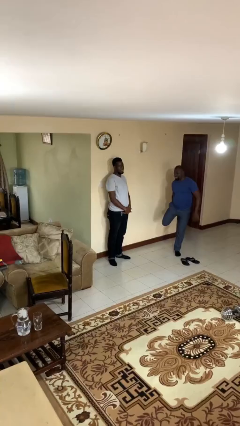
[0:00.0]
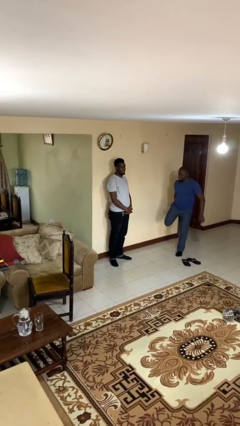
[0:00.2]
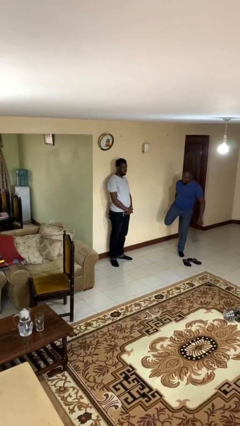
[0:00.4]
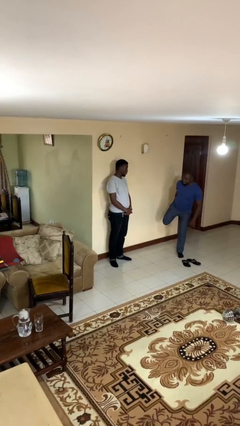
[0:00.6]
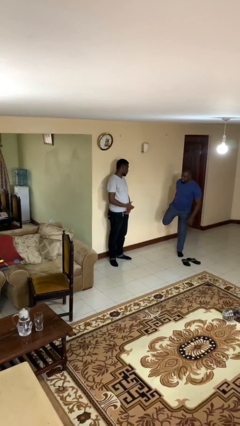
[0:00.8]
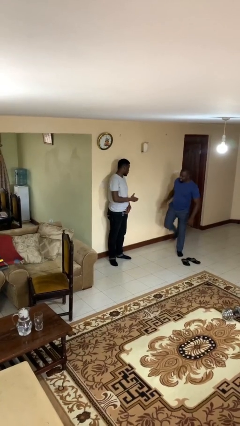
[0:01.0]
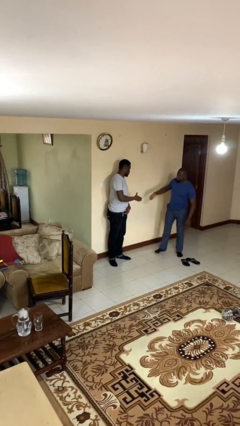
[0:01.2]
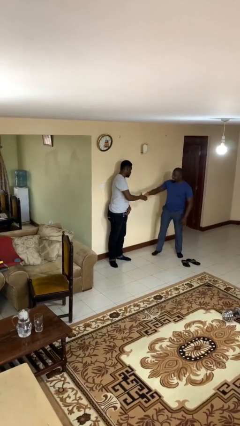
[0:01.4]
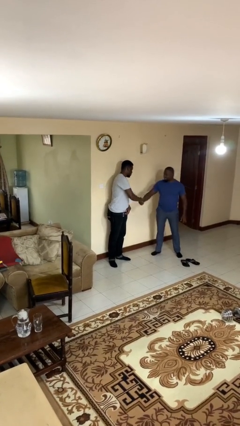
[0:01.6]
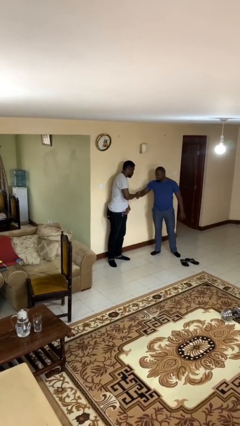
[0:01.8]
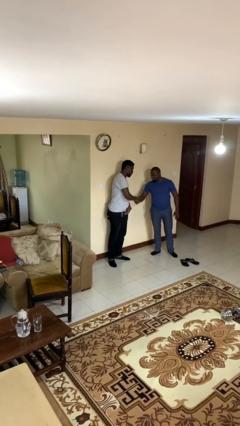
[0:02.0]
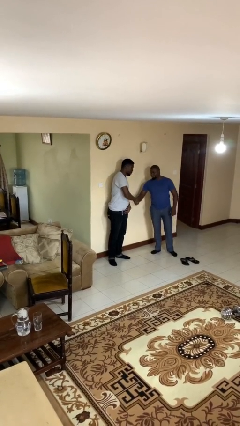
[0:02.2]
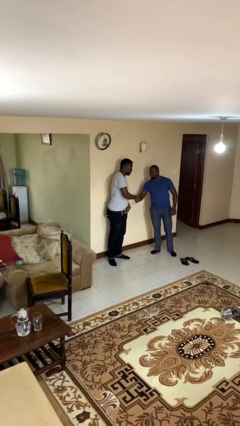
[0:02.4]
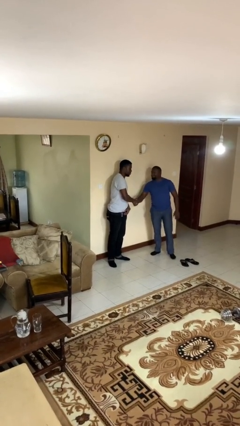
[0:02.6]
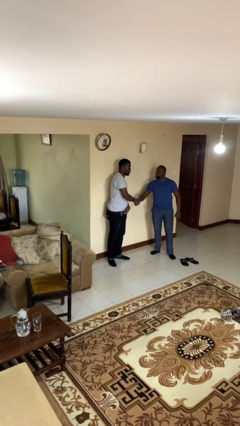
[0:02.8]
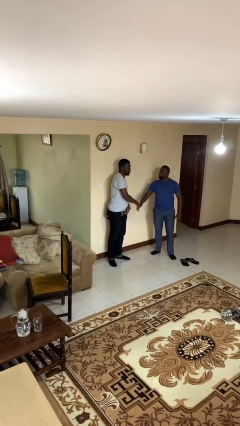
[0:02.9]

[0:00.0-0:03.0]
person shakes hand

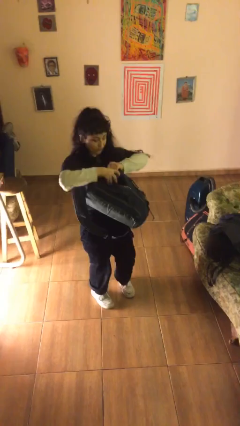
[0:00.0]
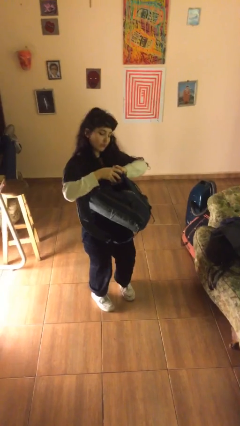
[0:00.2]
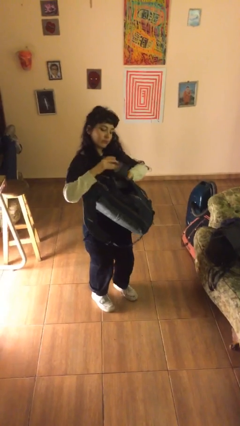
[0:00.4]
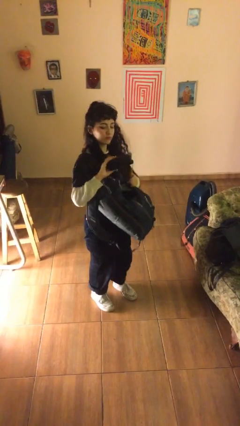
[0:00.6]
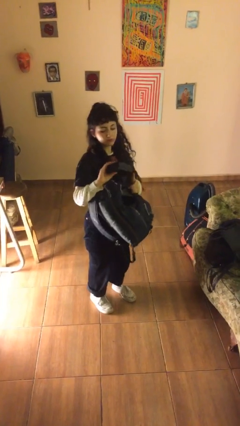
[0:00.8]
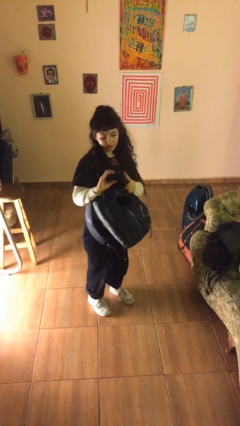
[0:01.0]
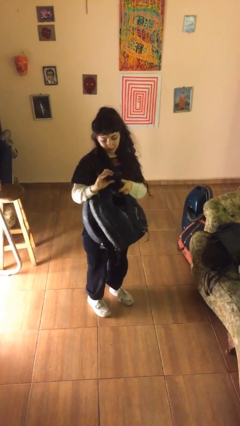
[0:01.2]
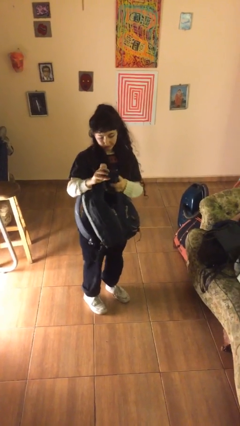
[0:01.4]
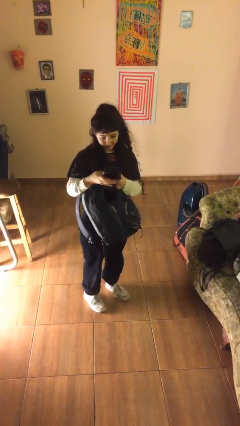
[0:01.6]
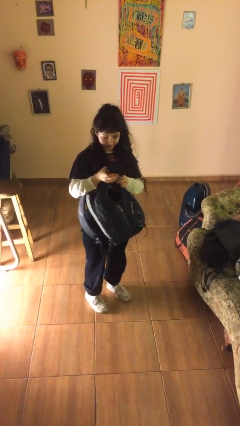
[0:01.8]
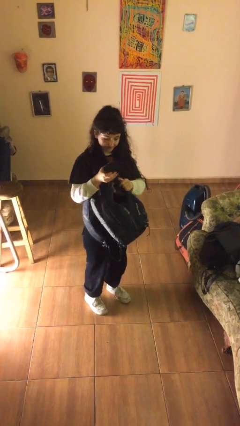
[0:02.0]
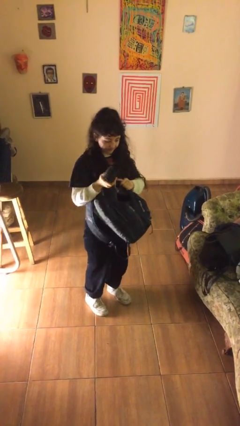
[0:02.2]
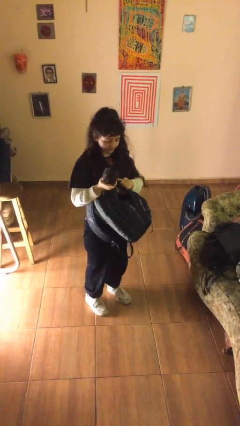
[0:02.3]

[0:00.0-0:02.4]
person takes object from backpack

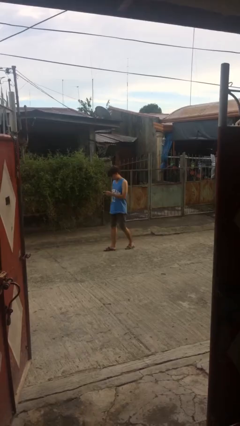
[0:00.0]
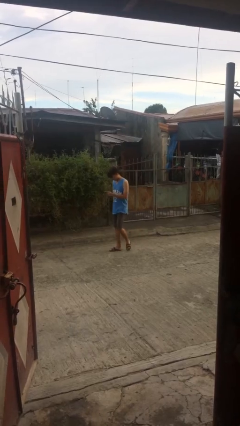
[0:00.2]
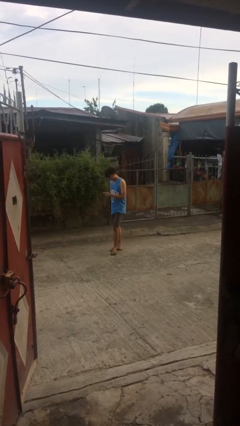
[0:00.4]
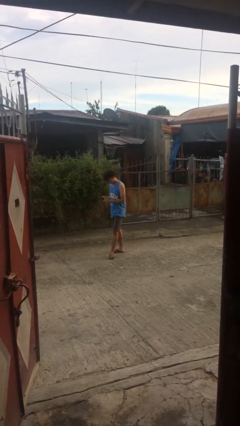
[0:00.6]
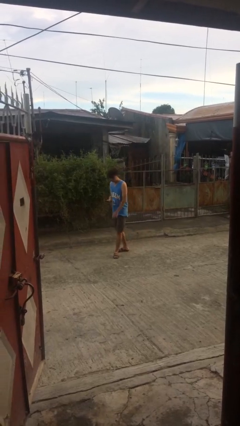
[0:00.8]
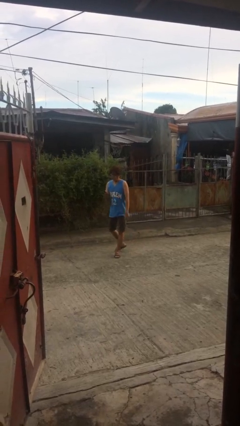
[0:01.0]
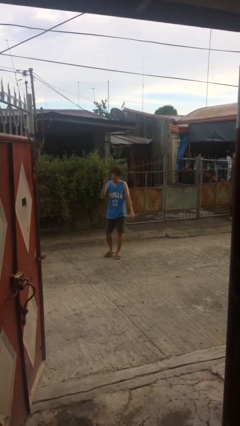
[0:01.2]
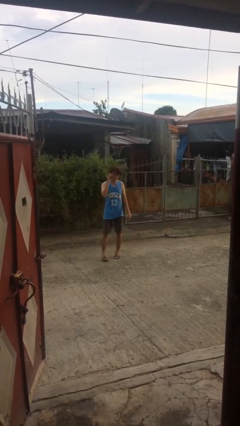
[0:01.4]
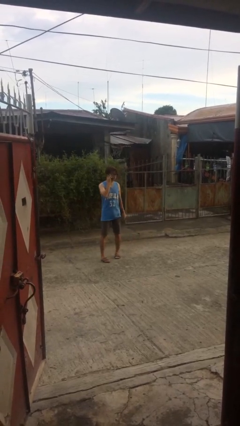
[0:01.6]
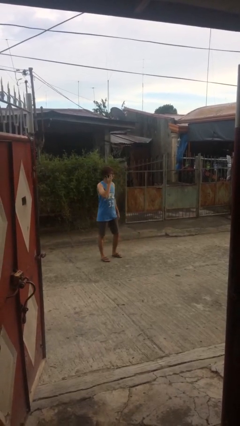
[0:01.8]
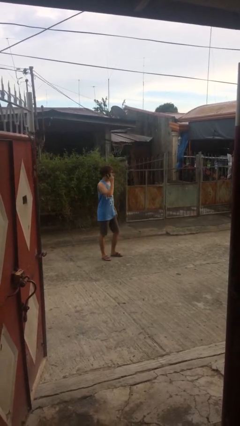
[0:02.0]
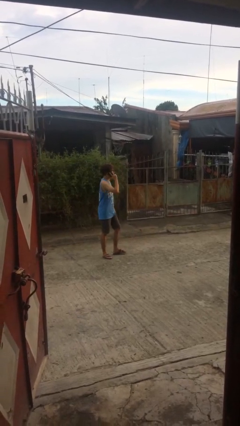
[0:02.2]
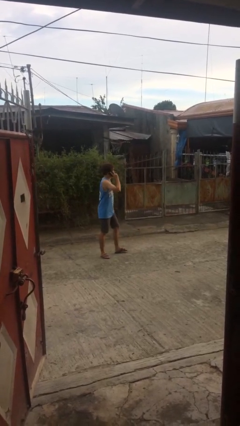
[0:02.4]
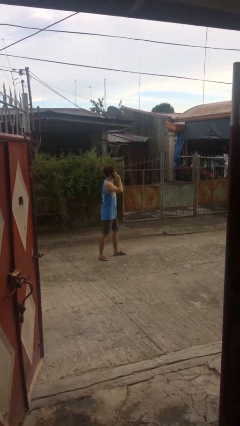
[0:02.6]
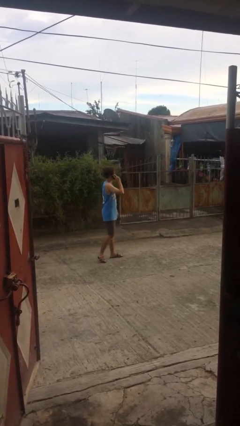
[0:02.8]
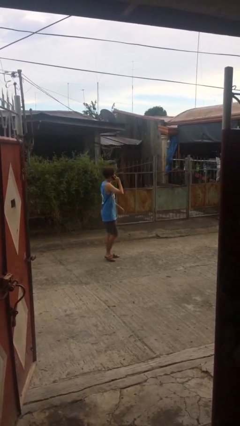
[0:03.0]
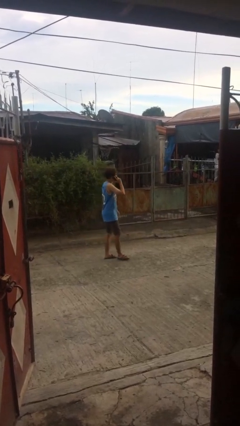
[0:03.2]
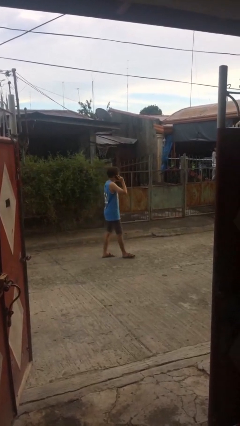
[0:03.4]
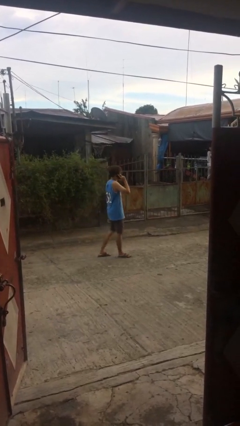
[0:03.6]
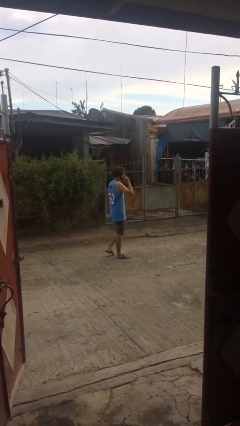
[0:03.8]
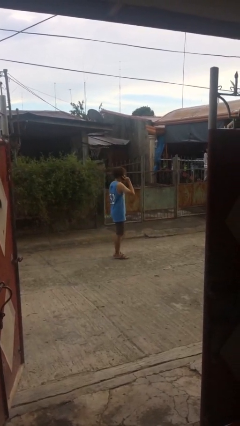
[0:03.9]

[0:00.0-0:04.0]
person talks on phone

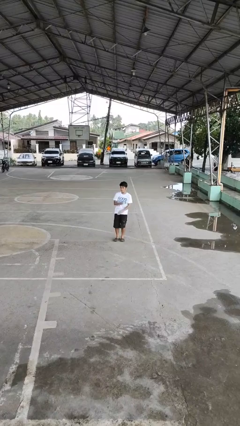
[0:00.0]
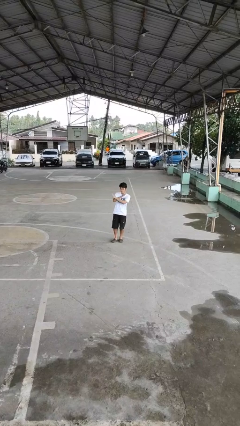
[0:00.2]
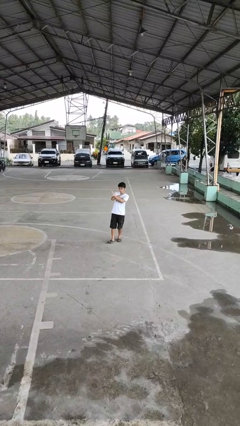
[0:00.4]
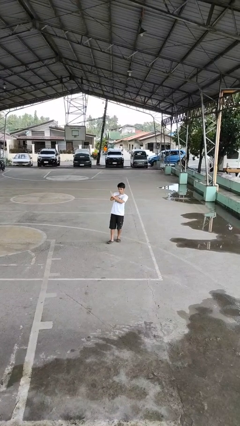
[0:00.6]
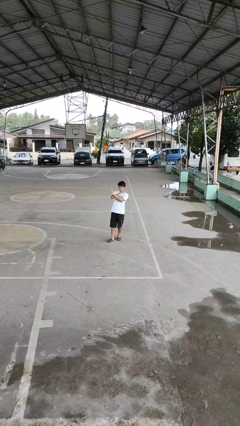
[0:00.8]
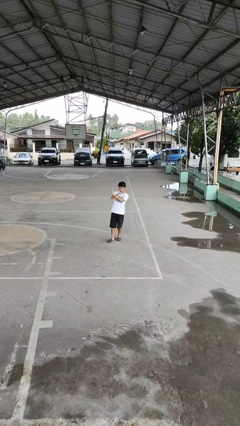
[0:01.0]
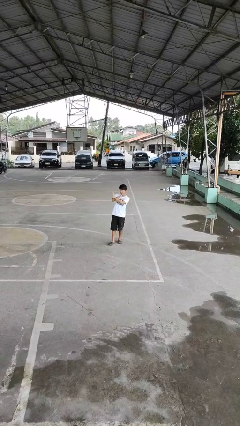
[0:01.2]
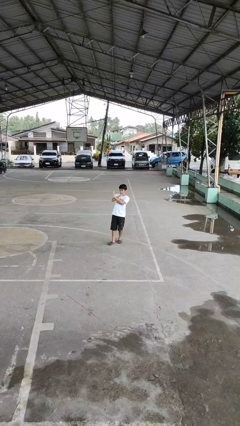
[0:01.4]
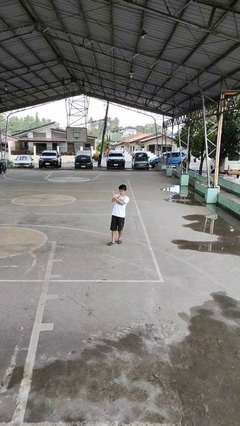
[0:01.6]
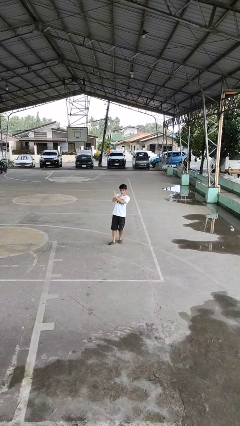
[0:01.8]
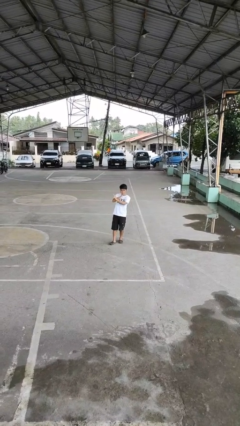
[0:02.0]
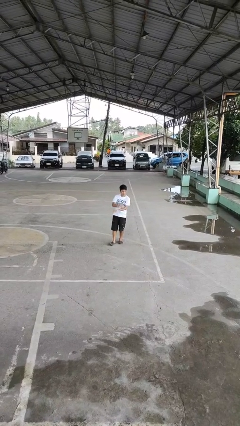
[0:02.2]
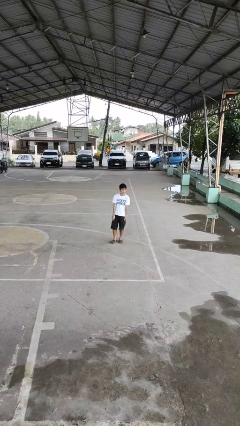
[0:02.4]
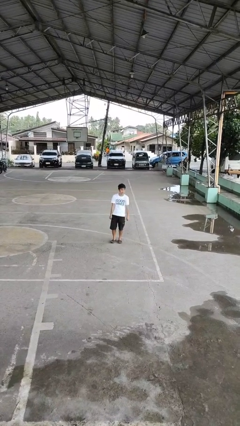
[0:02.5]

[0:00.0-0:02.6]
person gestures arms x

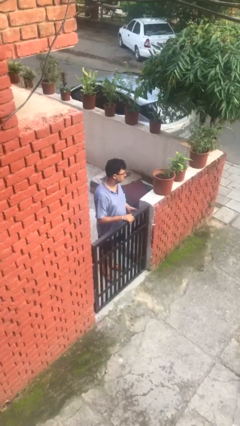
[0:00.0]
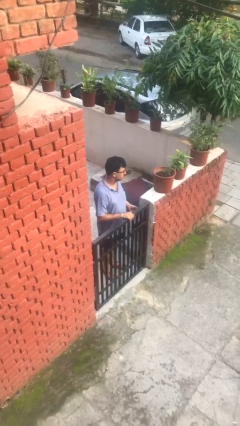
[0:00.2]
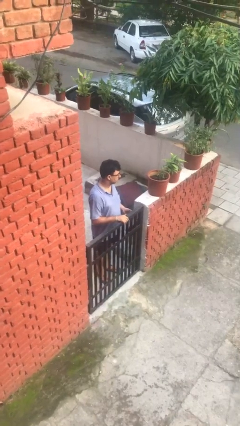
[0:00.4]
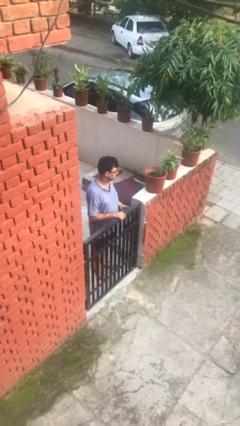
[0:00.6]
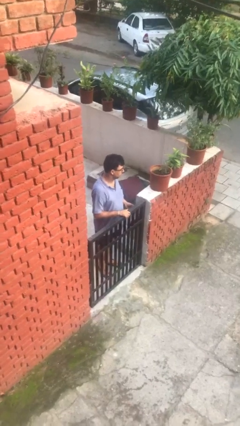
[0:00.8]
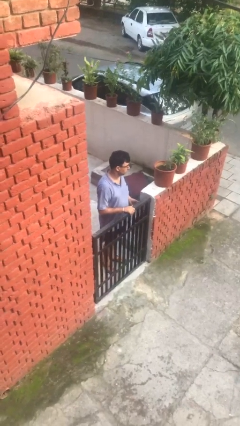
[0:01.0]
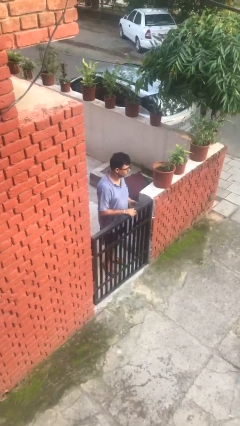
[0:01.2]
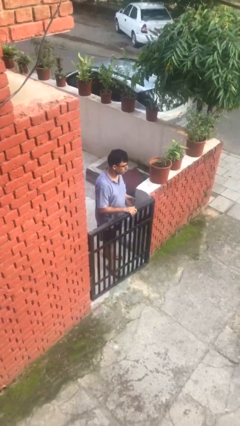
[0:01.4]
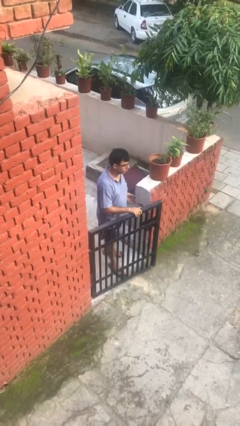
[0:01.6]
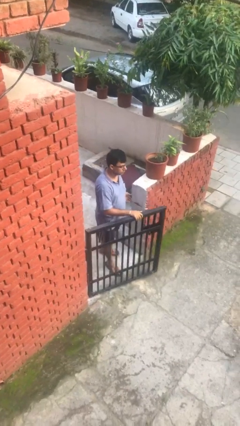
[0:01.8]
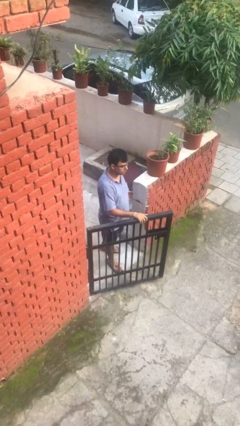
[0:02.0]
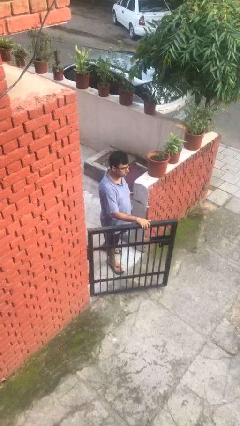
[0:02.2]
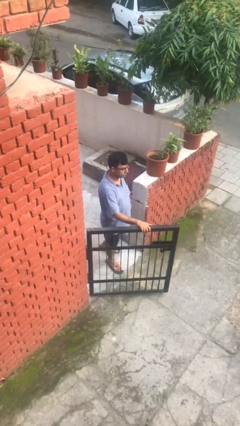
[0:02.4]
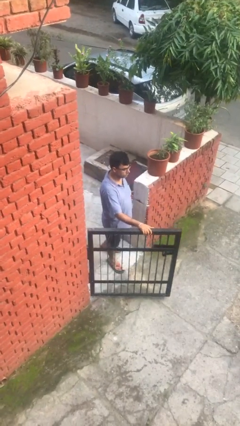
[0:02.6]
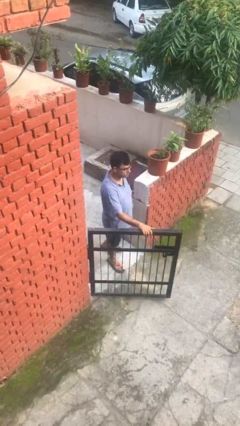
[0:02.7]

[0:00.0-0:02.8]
person opens gate

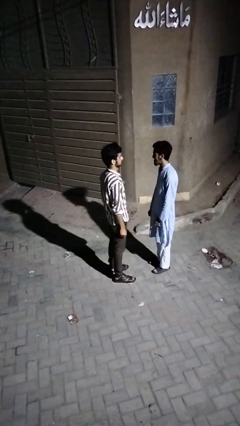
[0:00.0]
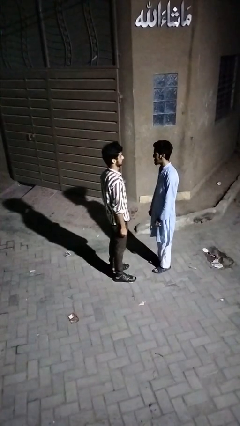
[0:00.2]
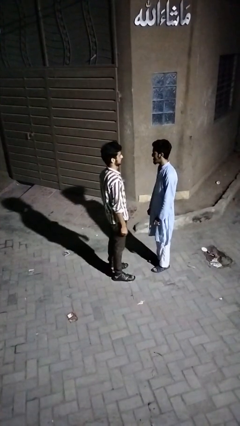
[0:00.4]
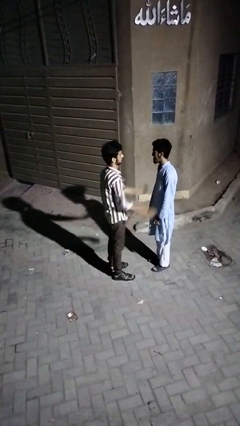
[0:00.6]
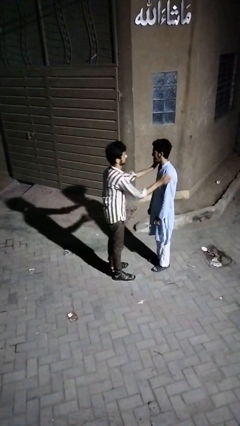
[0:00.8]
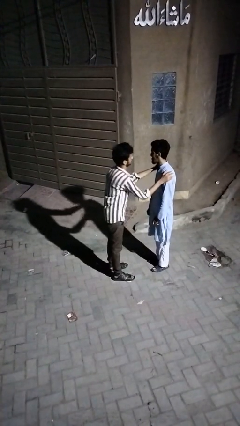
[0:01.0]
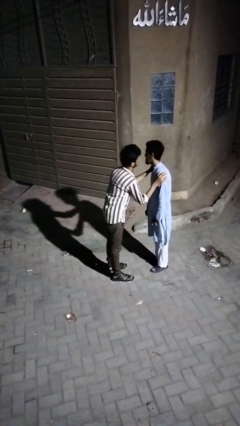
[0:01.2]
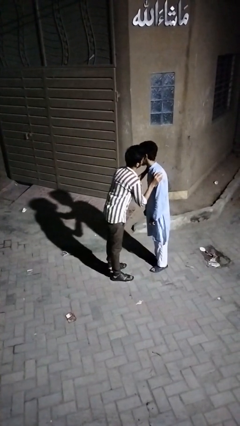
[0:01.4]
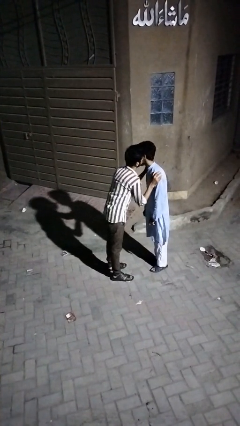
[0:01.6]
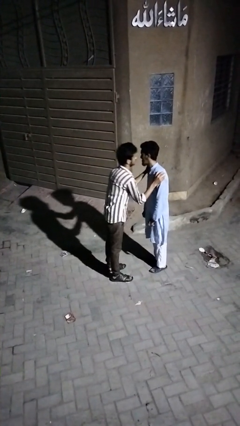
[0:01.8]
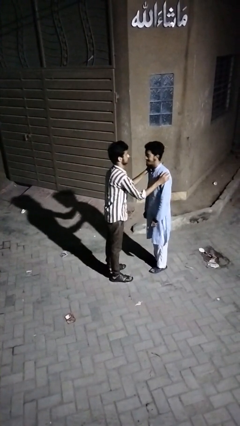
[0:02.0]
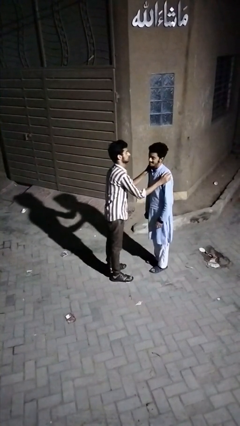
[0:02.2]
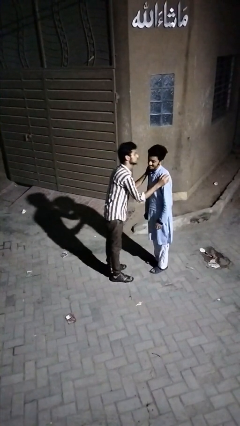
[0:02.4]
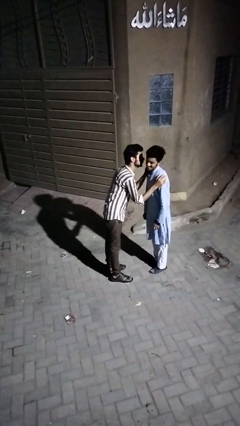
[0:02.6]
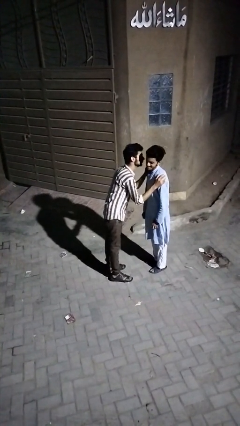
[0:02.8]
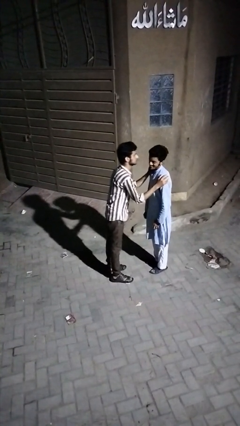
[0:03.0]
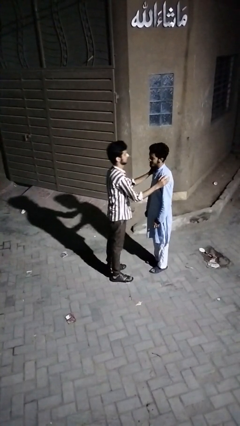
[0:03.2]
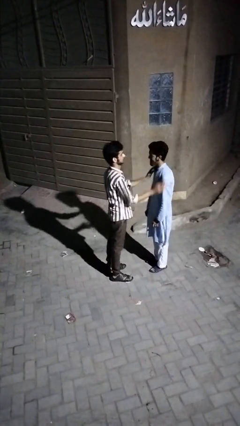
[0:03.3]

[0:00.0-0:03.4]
person kisses cheek of person
